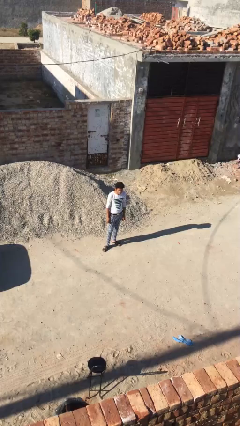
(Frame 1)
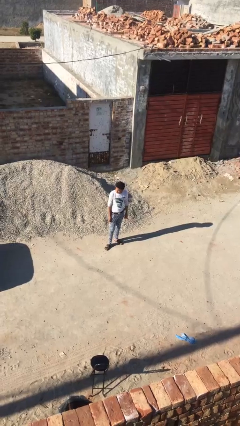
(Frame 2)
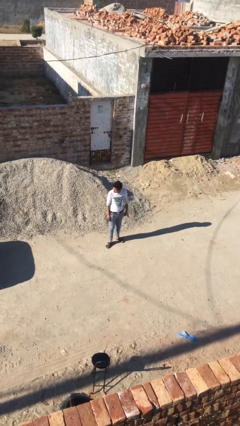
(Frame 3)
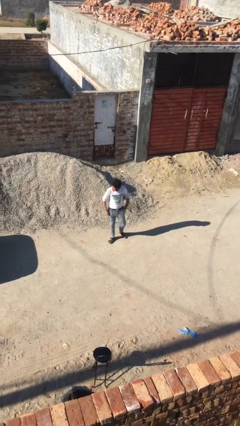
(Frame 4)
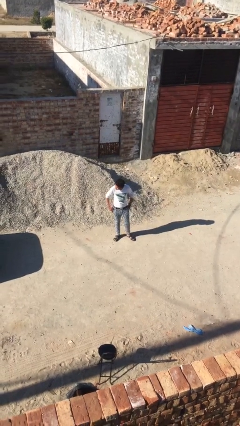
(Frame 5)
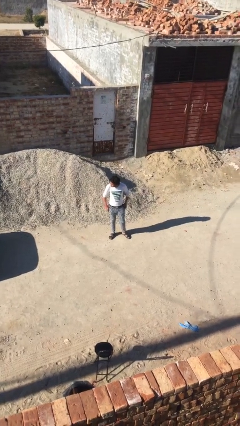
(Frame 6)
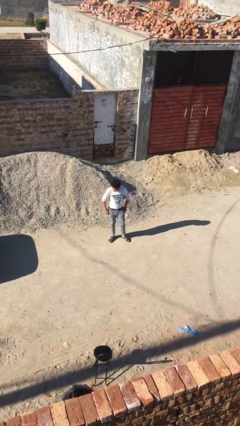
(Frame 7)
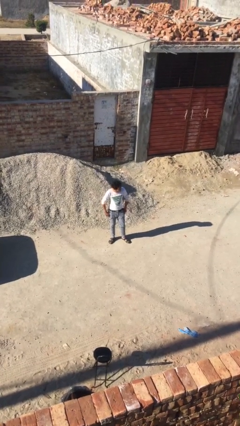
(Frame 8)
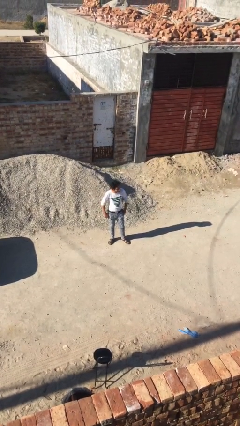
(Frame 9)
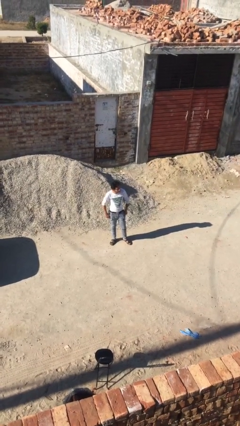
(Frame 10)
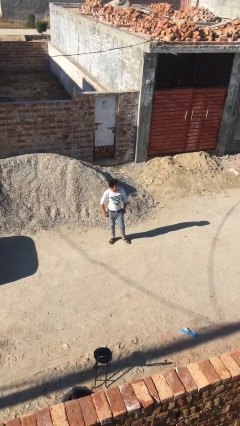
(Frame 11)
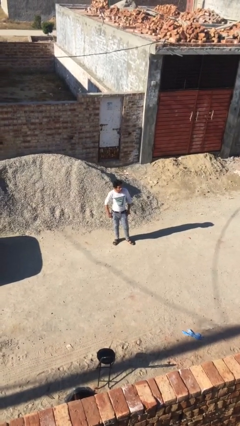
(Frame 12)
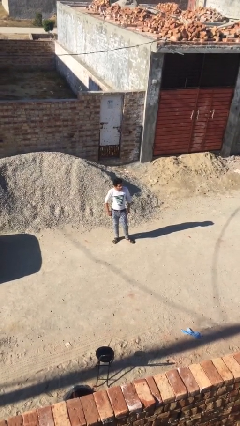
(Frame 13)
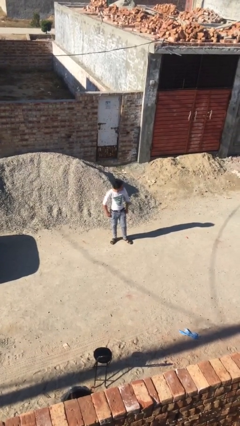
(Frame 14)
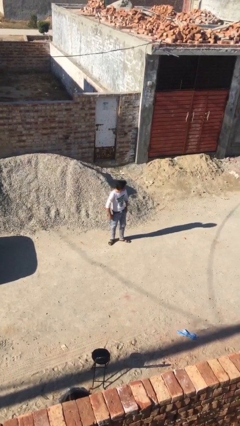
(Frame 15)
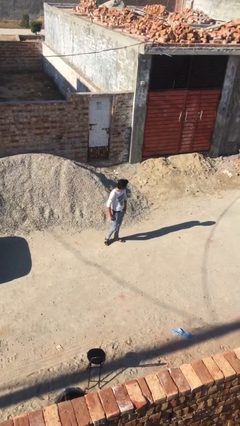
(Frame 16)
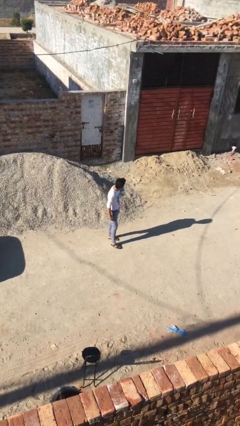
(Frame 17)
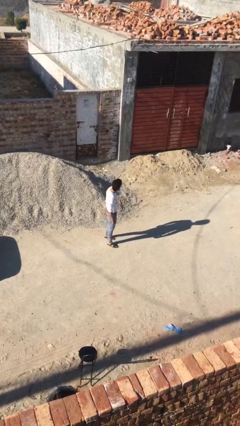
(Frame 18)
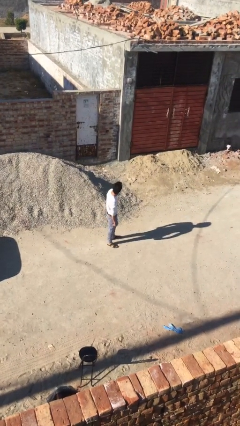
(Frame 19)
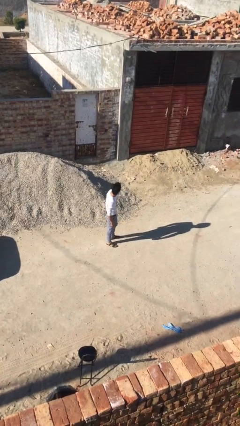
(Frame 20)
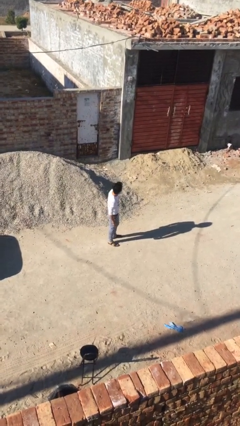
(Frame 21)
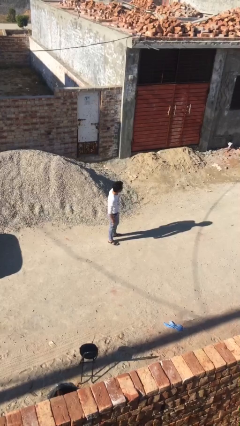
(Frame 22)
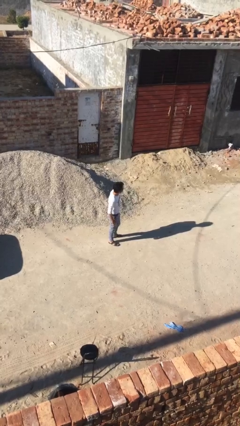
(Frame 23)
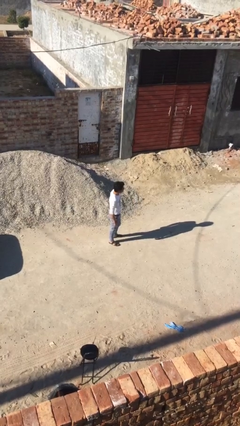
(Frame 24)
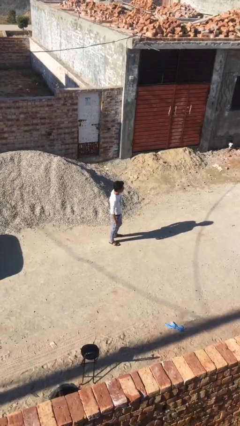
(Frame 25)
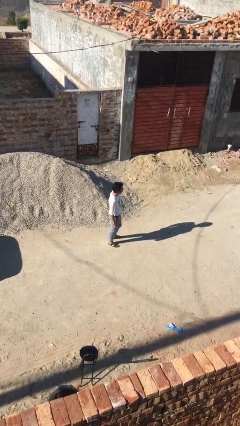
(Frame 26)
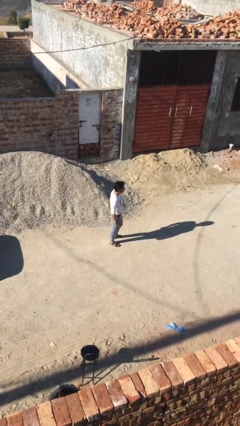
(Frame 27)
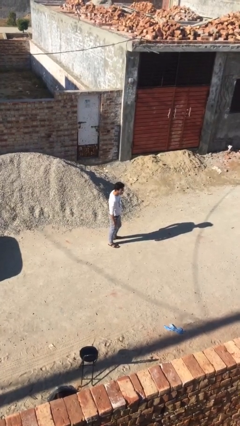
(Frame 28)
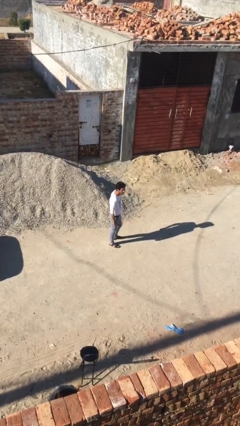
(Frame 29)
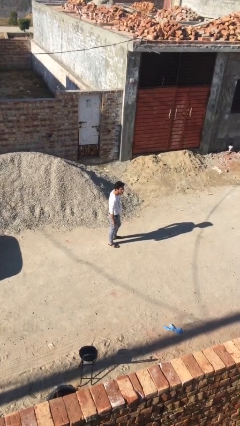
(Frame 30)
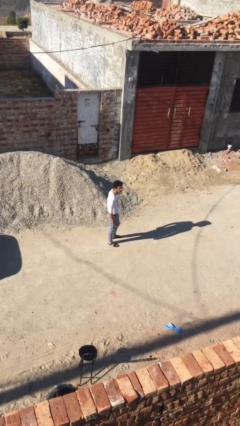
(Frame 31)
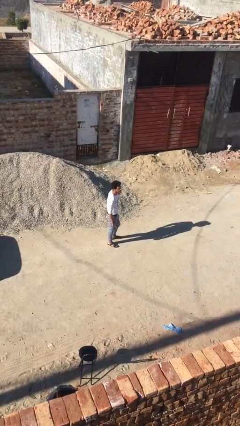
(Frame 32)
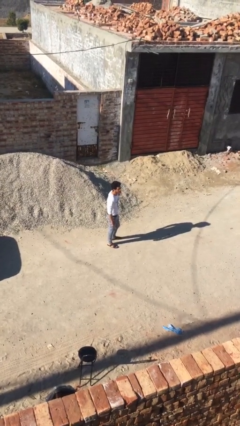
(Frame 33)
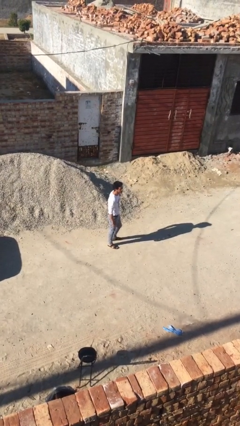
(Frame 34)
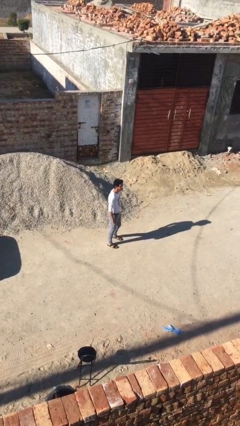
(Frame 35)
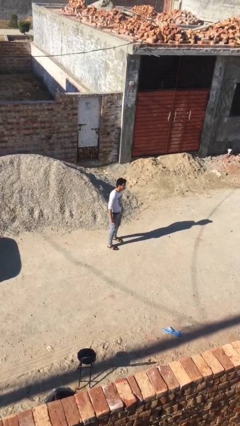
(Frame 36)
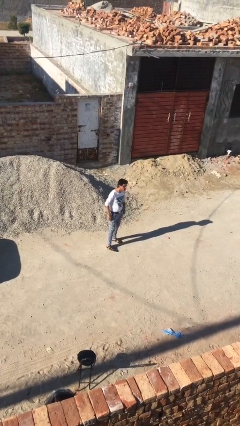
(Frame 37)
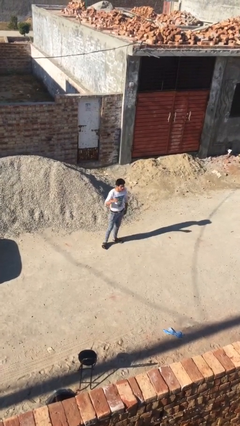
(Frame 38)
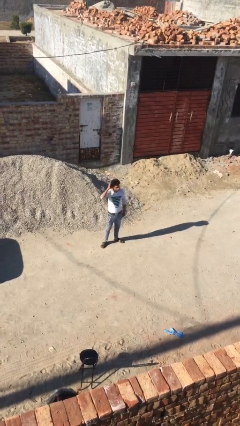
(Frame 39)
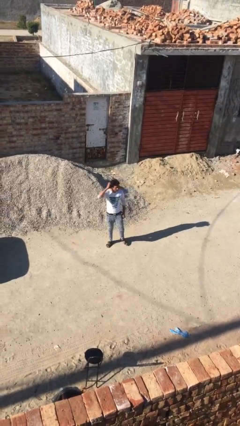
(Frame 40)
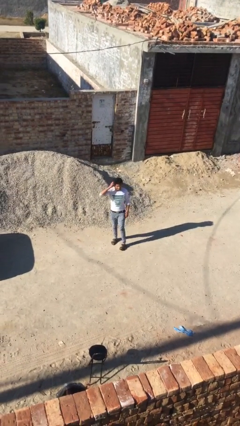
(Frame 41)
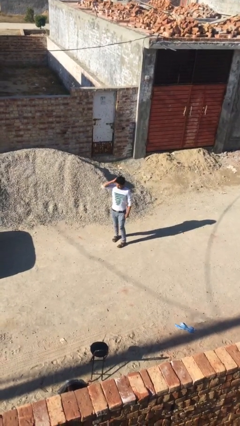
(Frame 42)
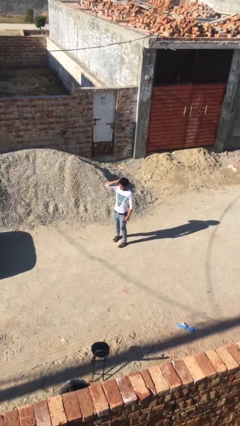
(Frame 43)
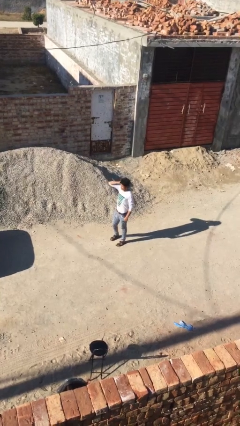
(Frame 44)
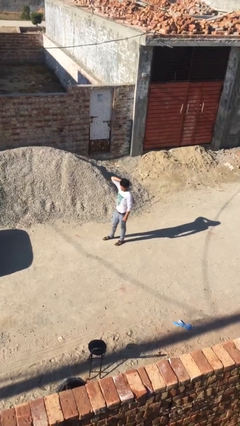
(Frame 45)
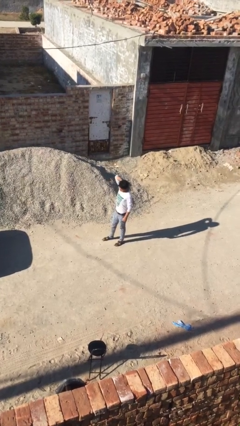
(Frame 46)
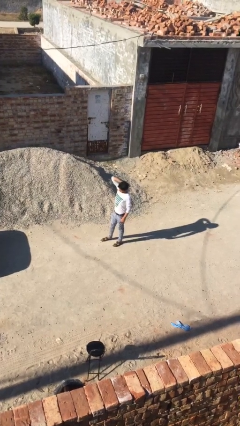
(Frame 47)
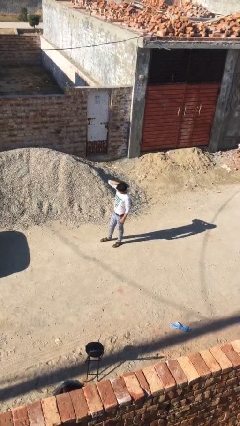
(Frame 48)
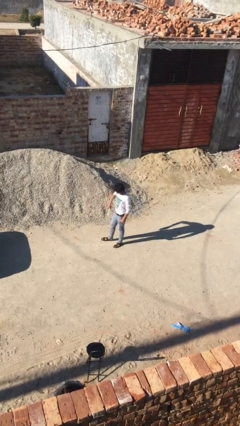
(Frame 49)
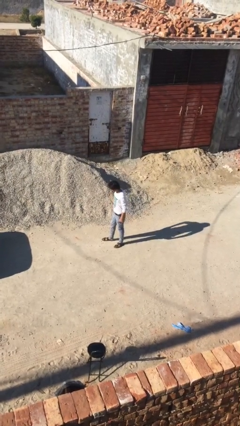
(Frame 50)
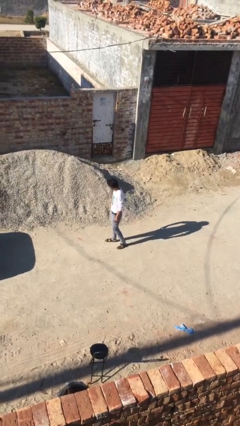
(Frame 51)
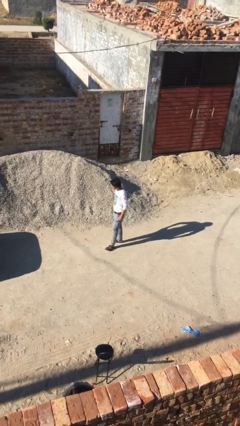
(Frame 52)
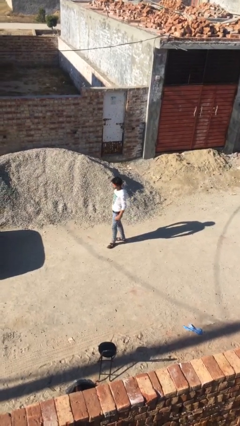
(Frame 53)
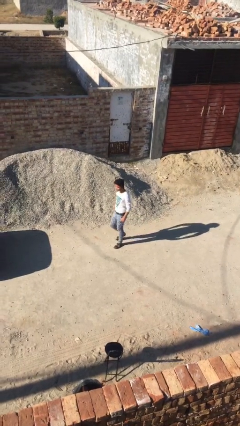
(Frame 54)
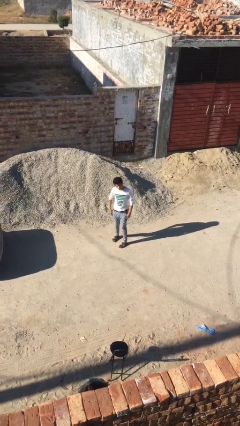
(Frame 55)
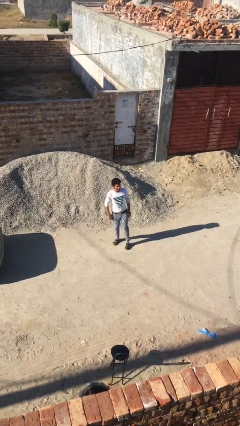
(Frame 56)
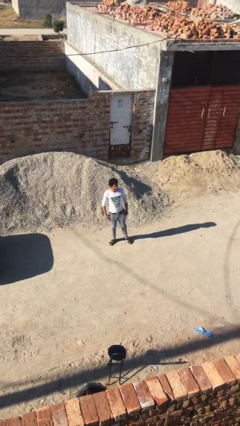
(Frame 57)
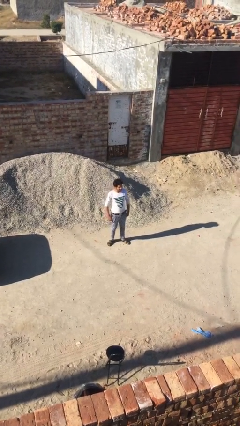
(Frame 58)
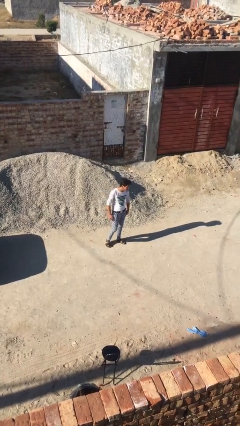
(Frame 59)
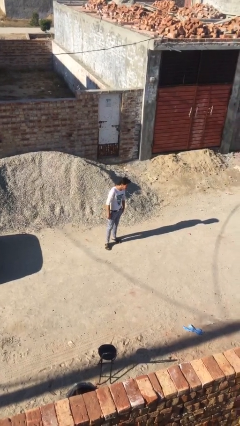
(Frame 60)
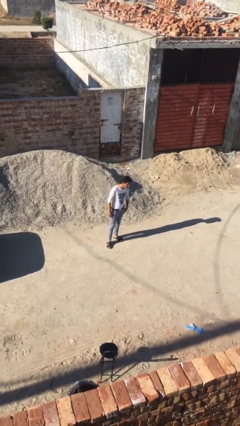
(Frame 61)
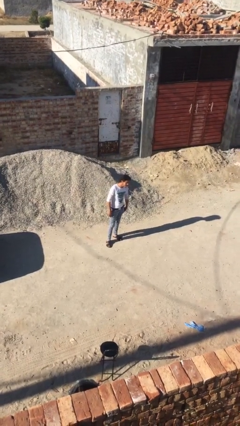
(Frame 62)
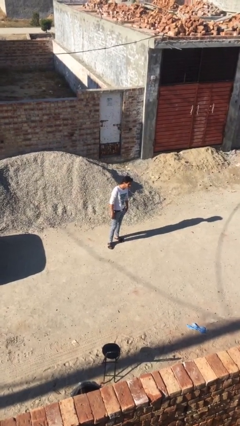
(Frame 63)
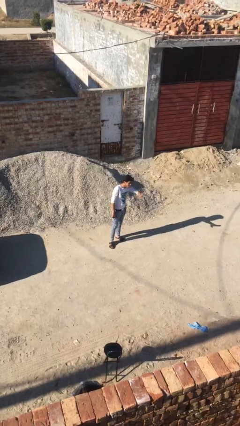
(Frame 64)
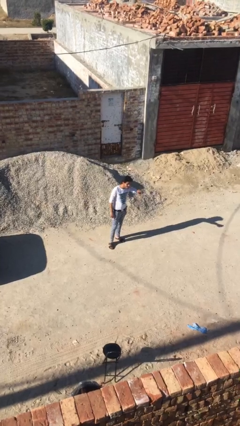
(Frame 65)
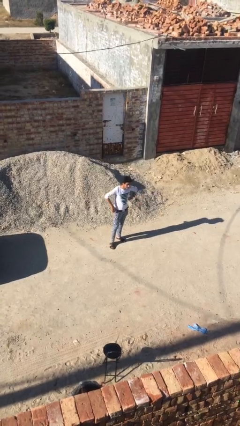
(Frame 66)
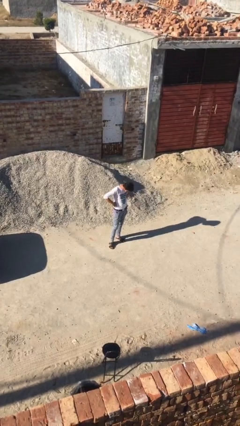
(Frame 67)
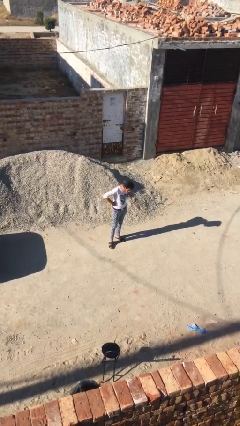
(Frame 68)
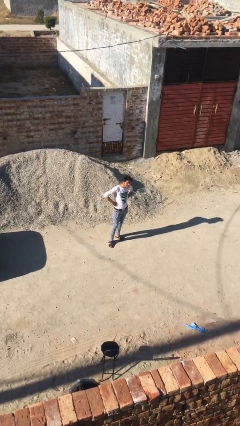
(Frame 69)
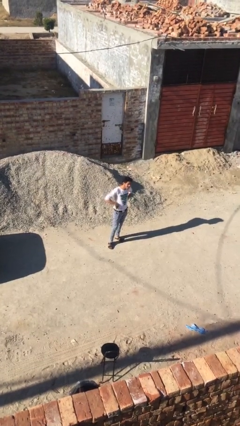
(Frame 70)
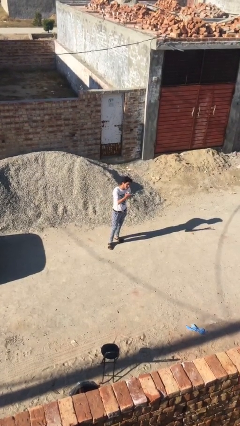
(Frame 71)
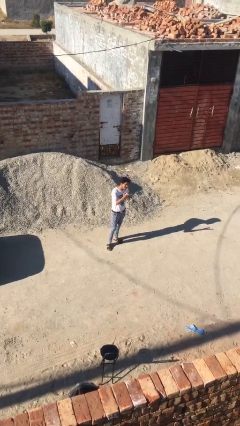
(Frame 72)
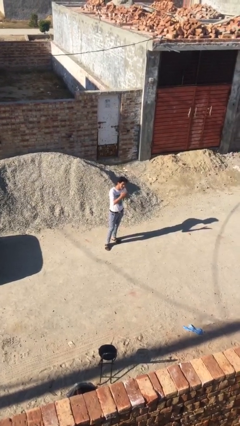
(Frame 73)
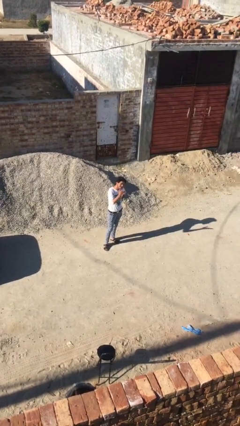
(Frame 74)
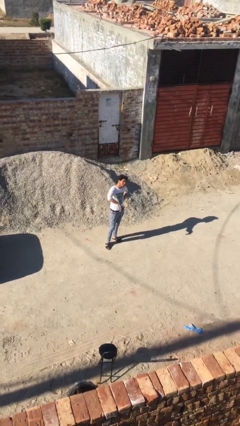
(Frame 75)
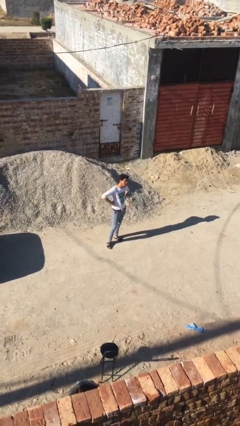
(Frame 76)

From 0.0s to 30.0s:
person walks

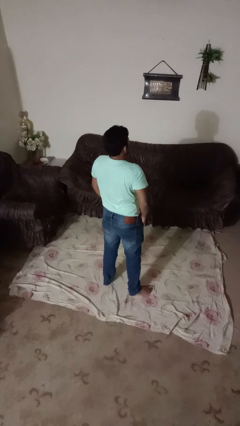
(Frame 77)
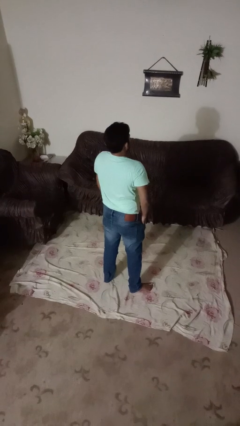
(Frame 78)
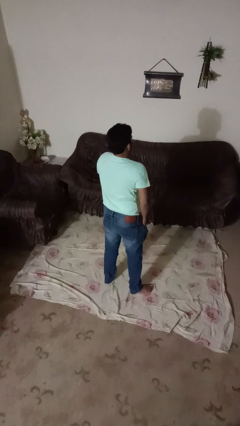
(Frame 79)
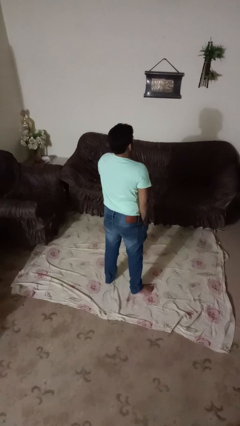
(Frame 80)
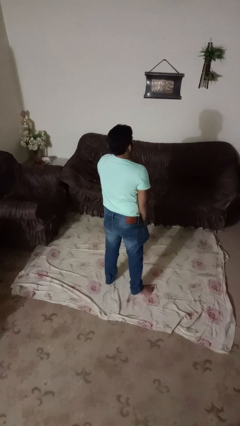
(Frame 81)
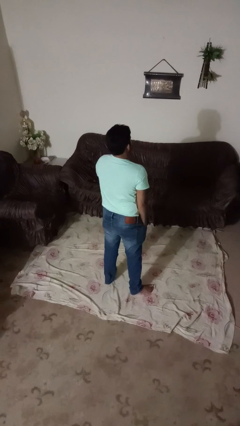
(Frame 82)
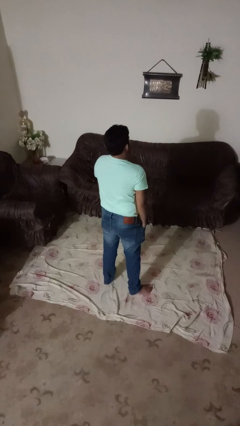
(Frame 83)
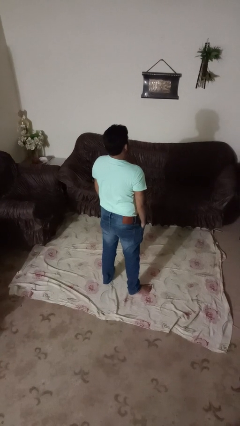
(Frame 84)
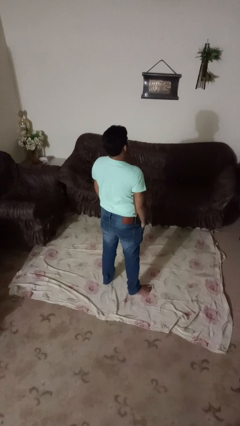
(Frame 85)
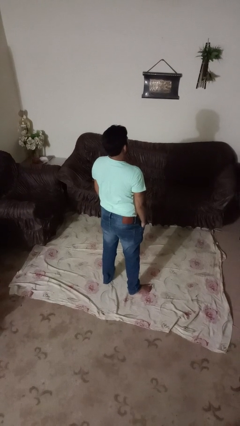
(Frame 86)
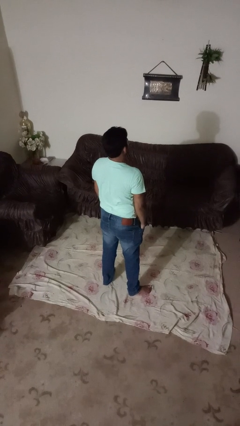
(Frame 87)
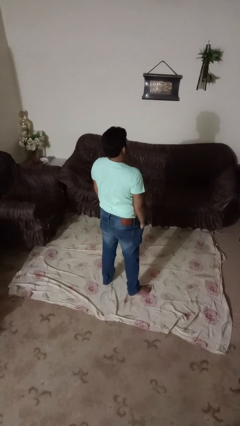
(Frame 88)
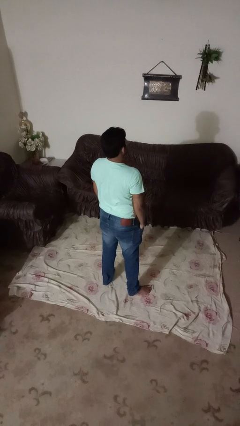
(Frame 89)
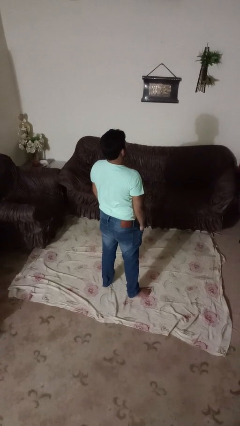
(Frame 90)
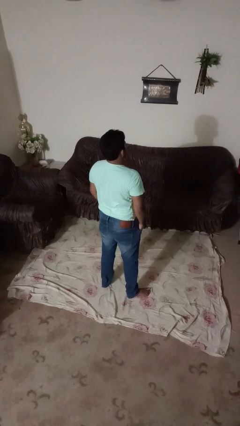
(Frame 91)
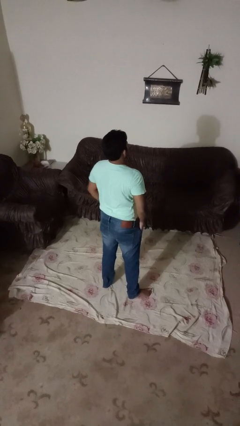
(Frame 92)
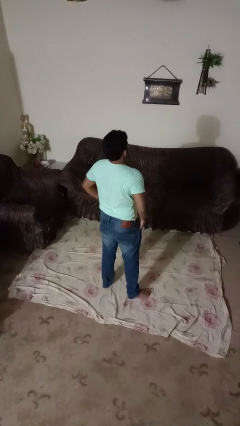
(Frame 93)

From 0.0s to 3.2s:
person puts hands in back pockets

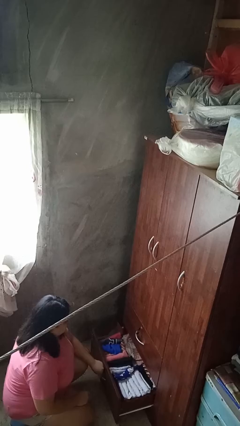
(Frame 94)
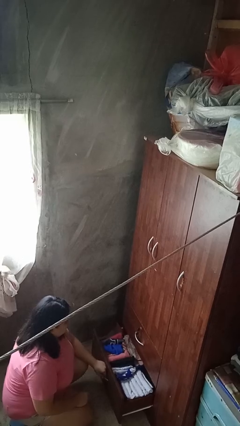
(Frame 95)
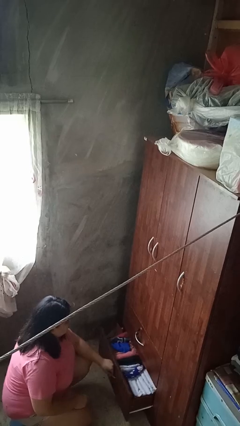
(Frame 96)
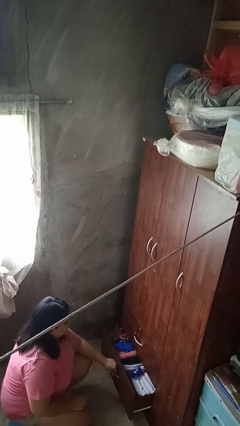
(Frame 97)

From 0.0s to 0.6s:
person closes dresser drawer
